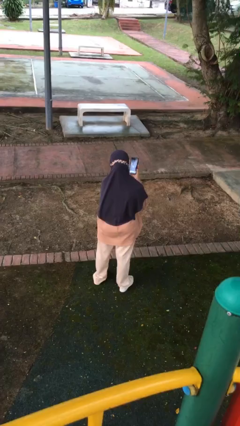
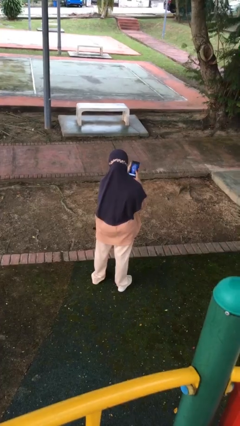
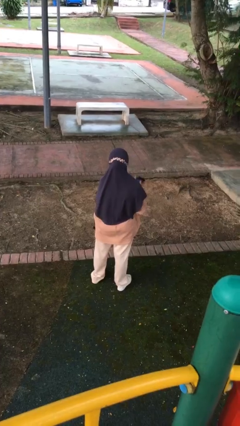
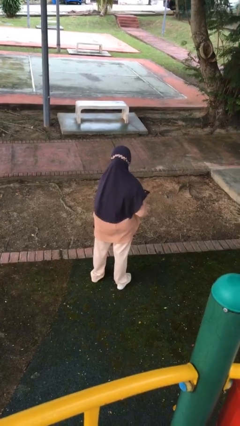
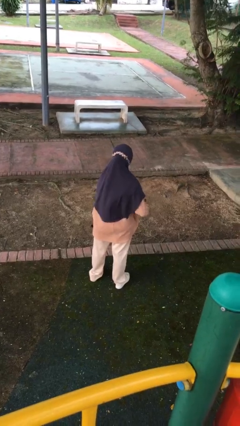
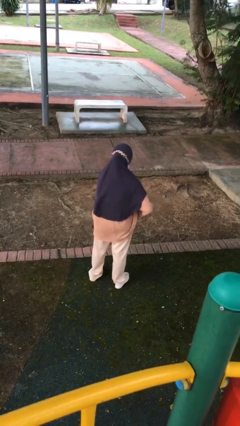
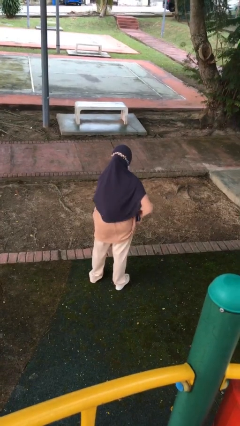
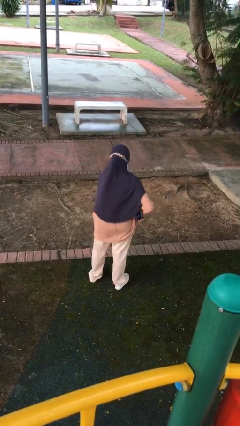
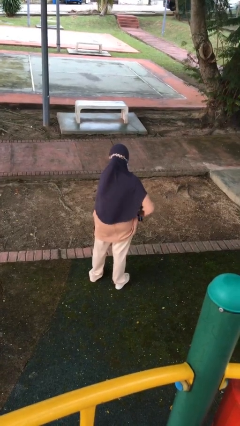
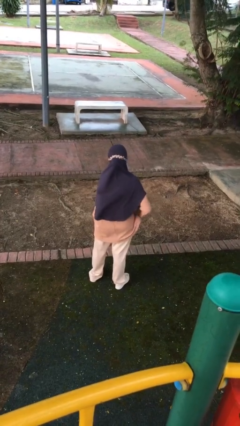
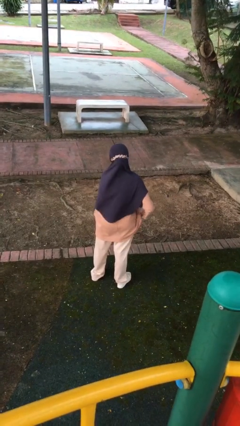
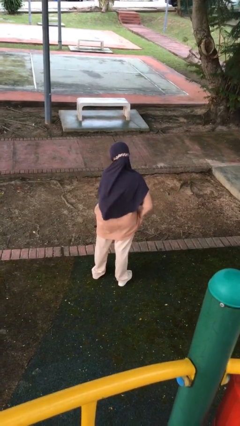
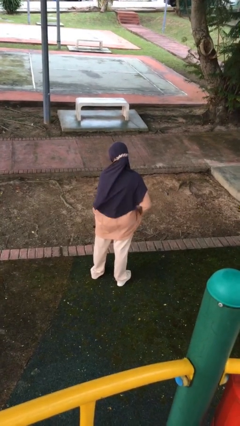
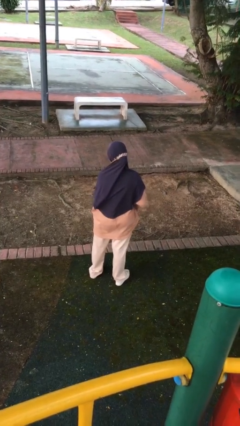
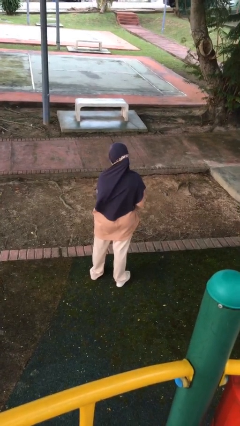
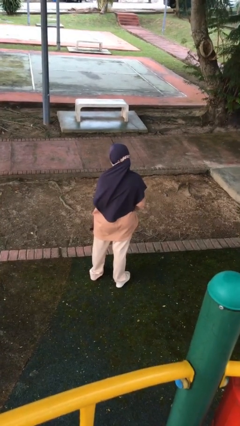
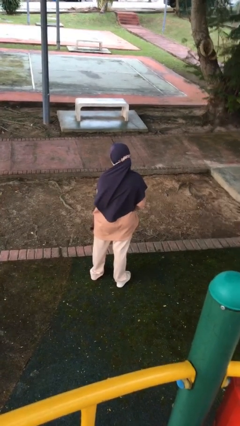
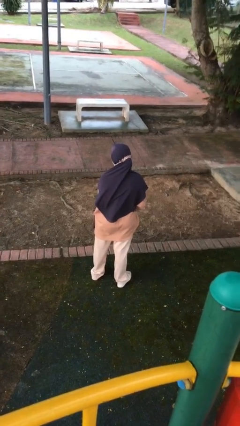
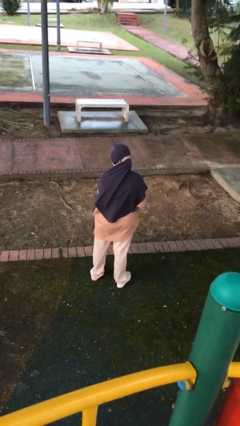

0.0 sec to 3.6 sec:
person puts phone into pocket

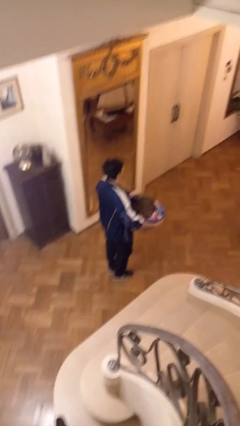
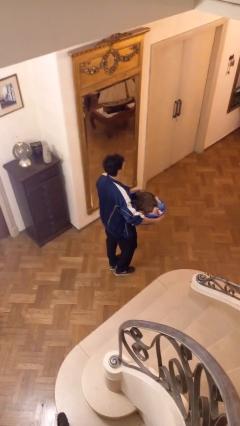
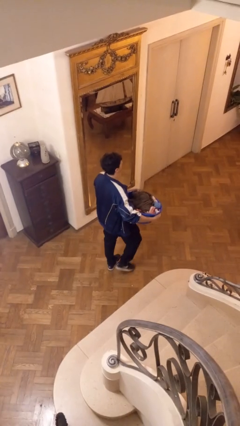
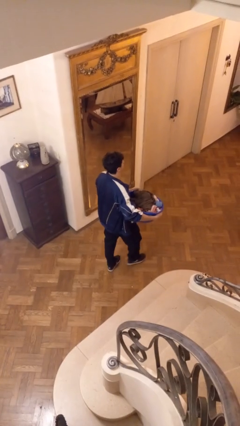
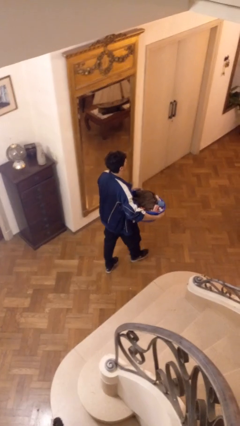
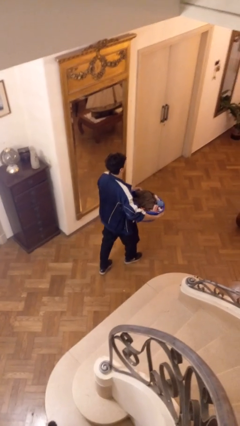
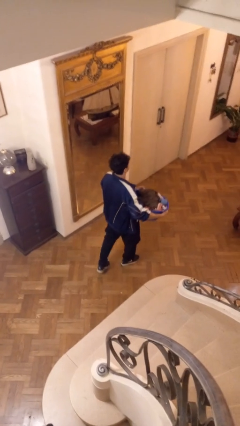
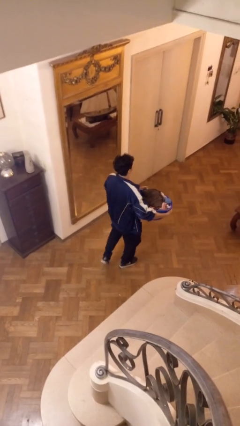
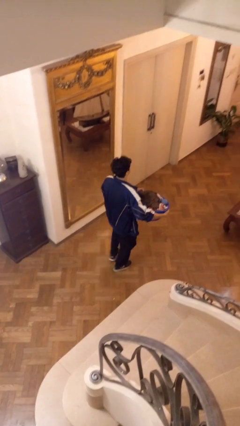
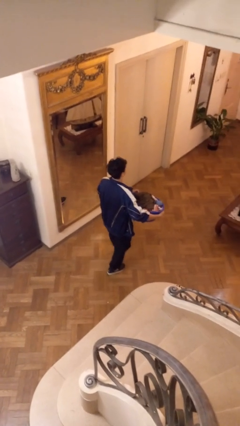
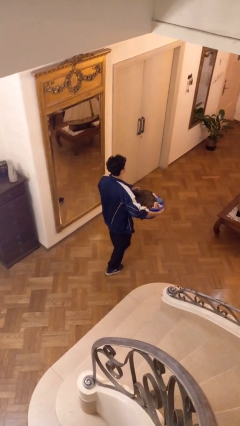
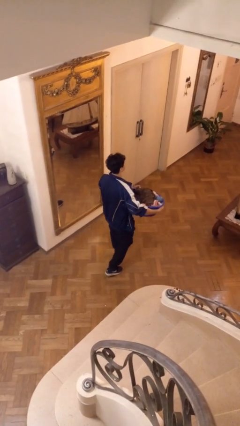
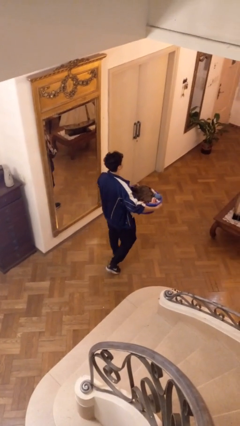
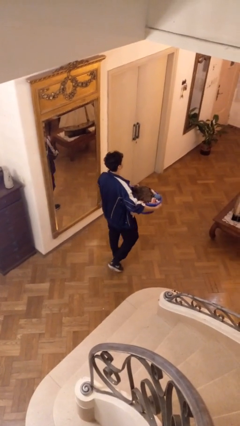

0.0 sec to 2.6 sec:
person carries laundry basket

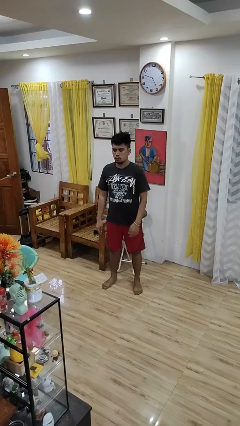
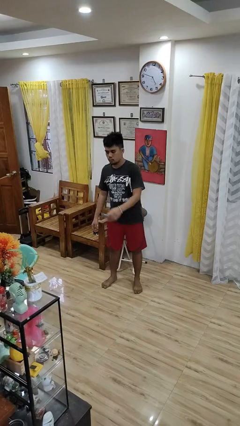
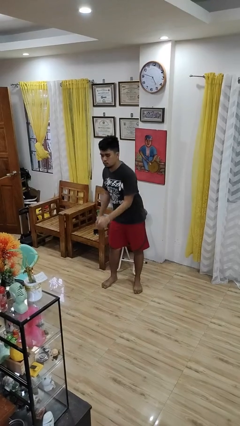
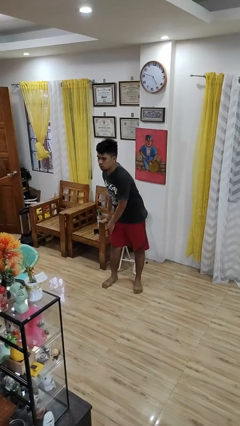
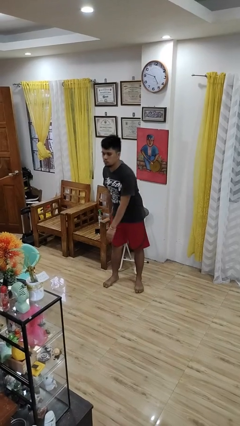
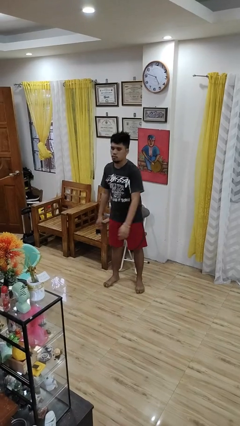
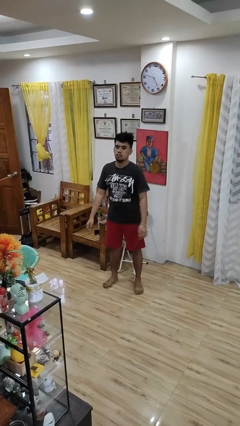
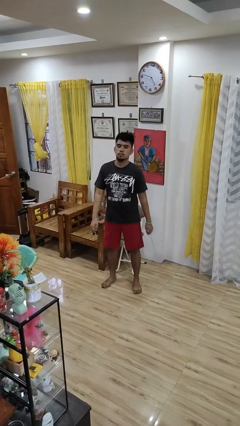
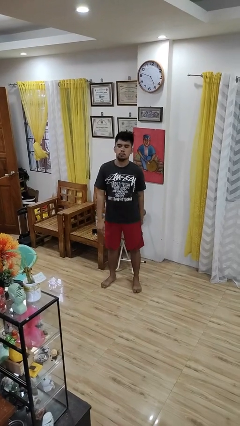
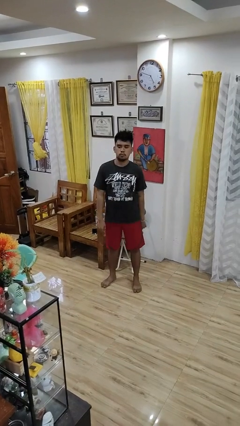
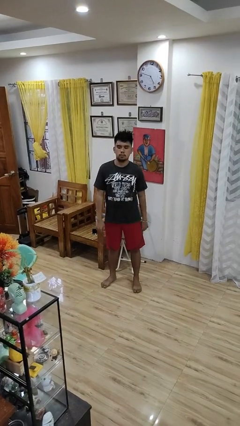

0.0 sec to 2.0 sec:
person slaps hands on thighs

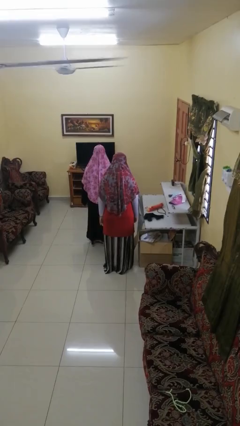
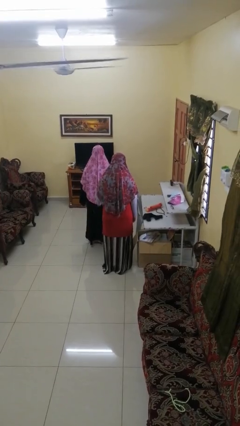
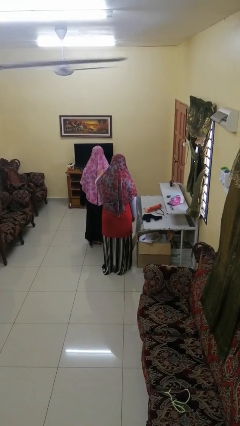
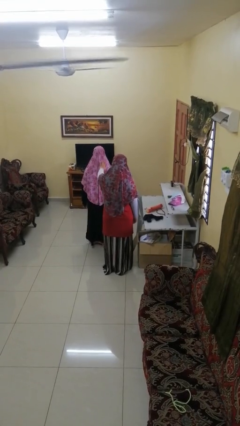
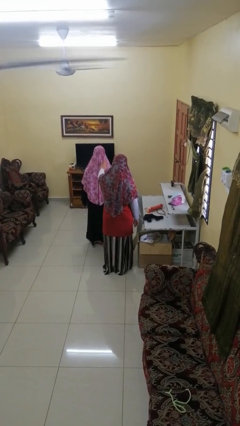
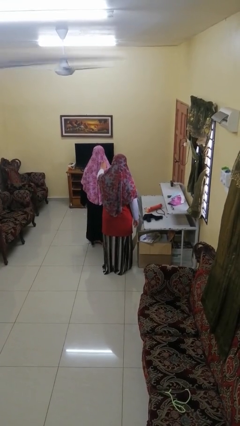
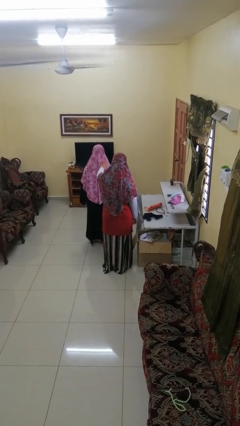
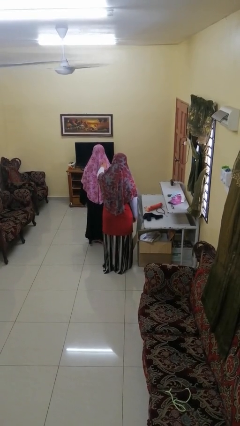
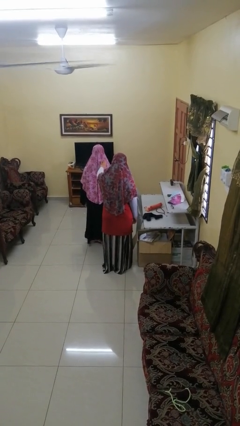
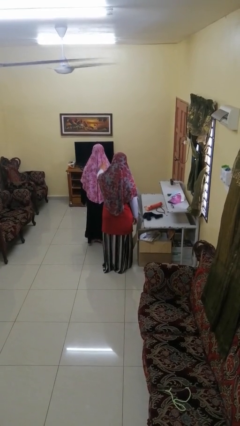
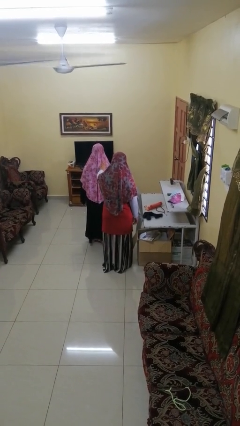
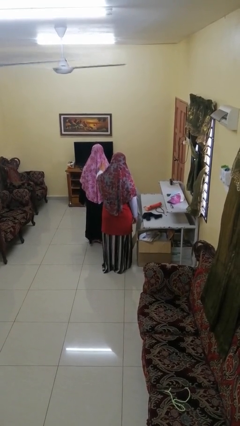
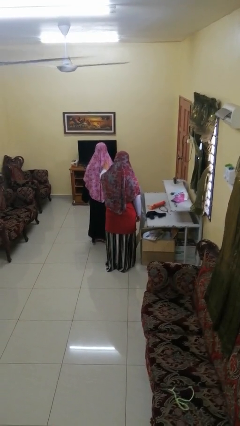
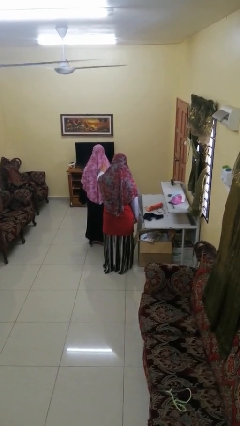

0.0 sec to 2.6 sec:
person touches back of person

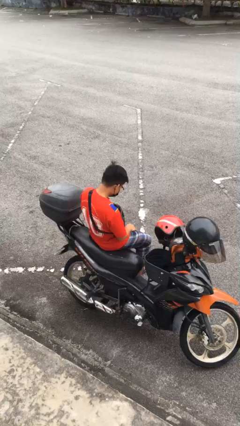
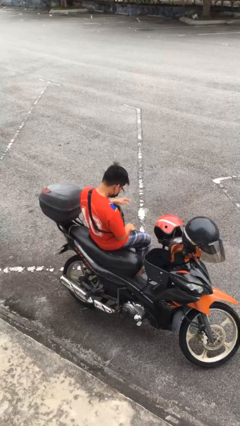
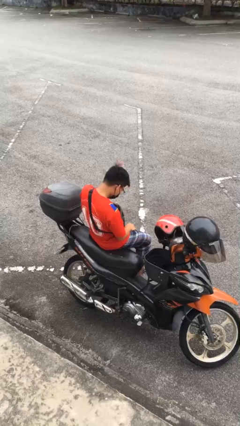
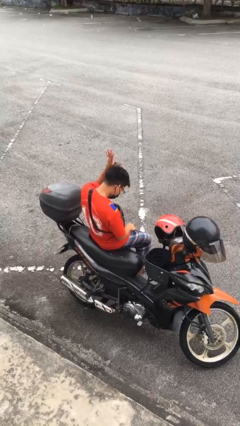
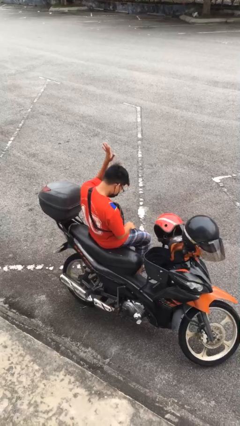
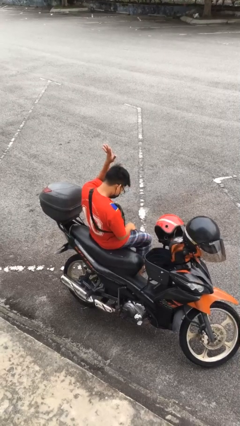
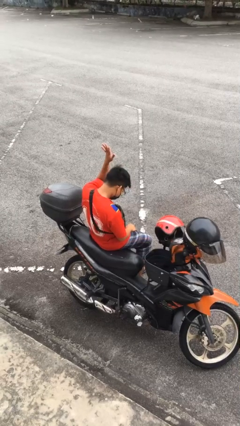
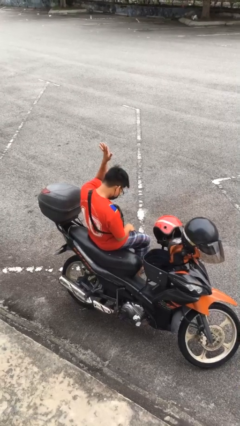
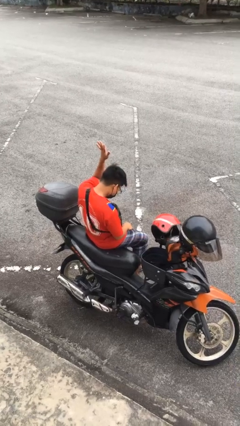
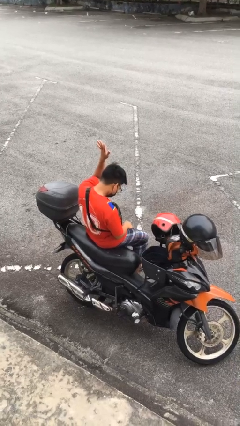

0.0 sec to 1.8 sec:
person gestures raise hand

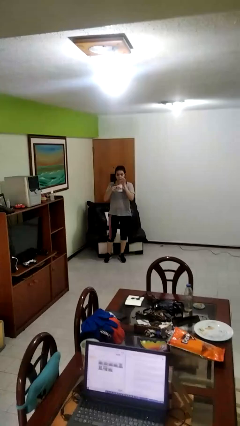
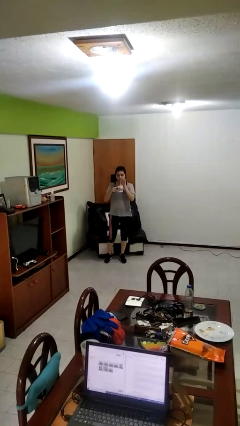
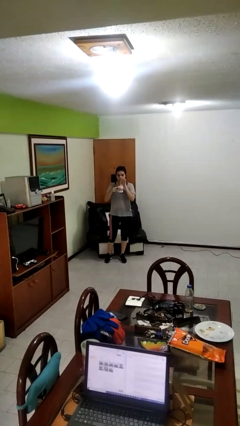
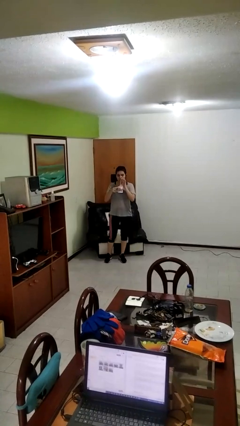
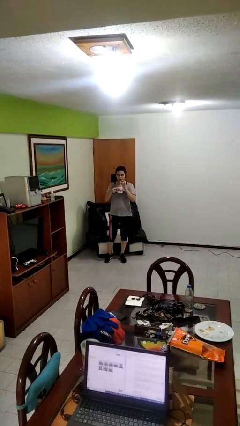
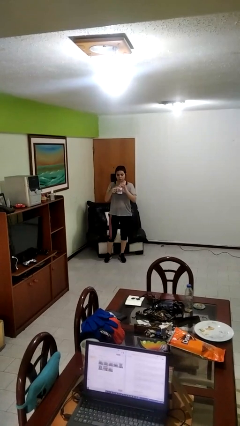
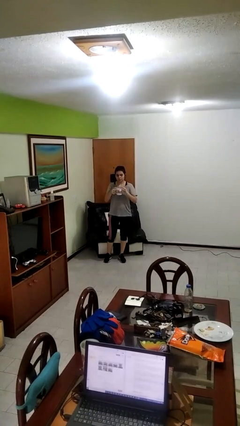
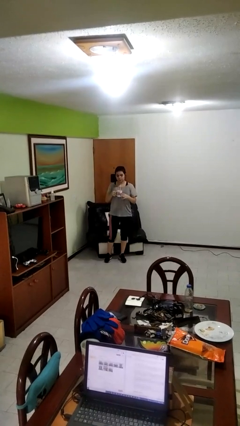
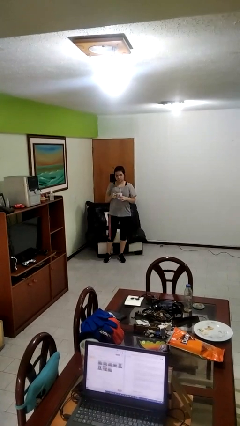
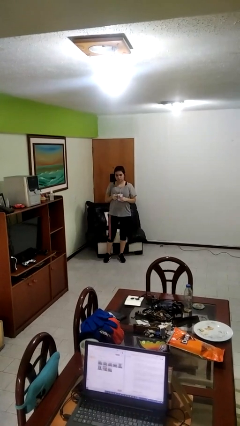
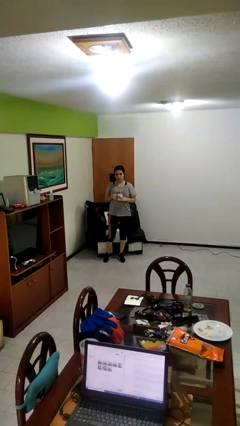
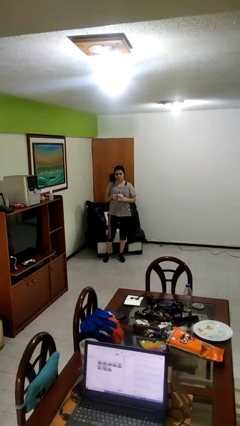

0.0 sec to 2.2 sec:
person drinks from straw

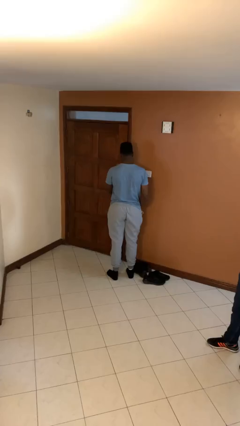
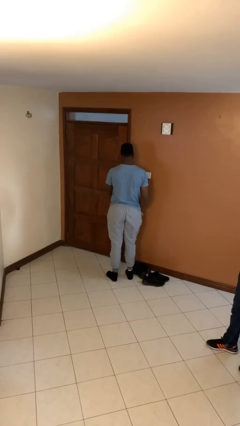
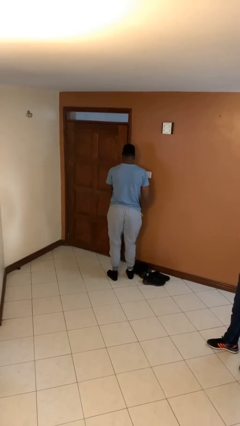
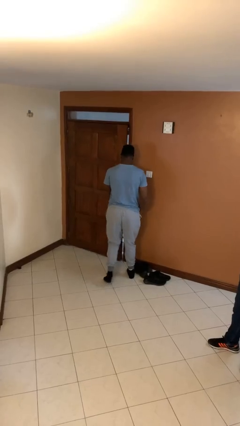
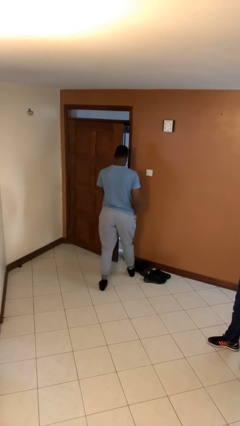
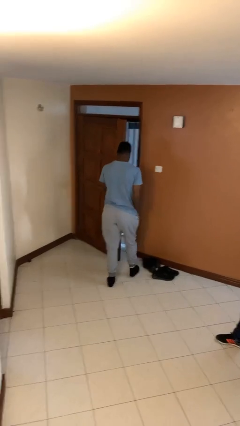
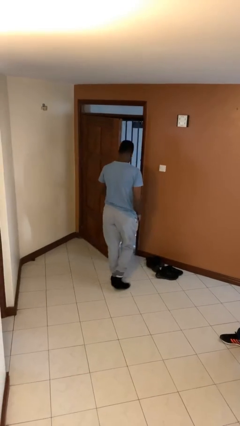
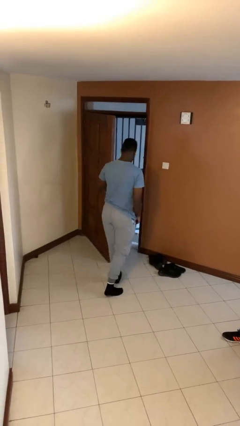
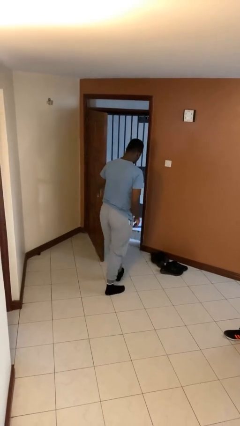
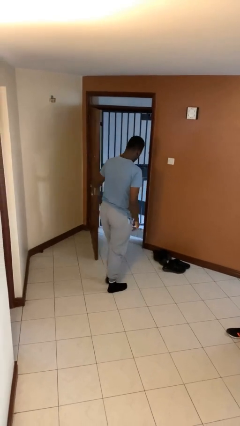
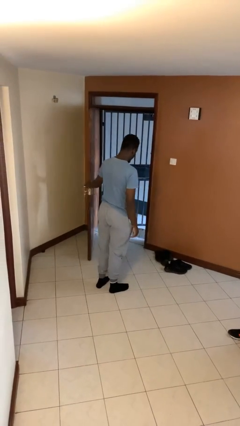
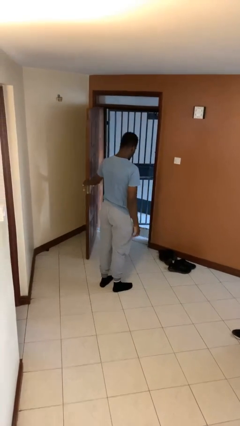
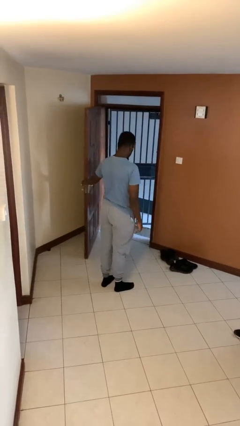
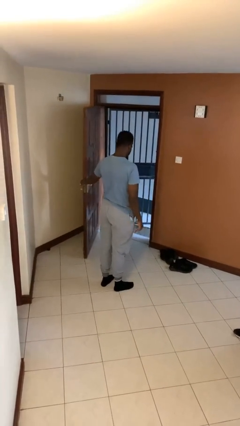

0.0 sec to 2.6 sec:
person opens facility door
